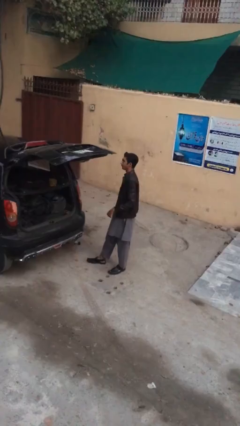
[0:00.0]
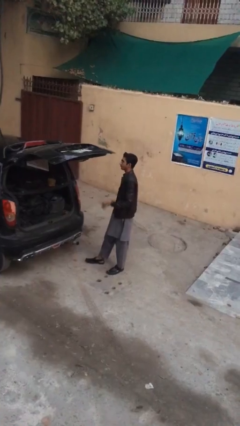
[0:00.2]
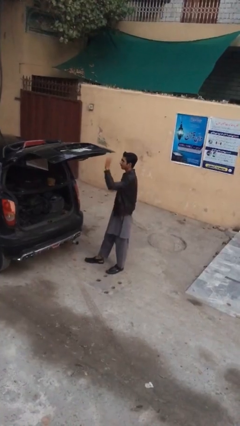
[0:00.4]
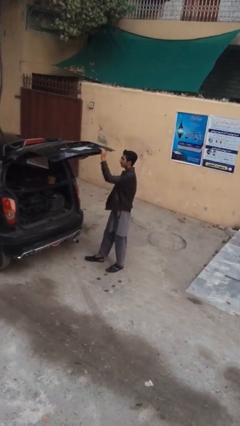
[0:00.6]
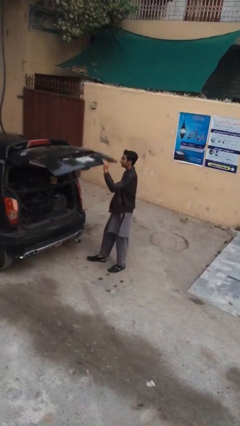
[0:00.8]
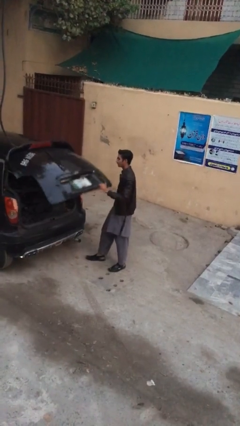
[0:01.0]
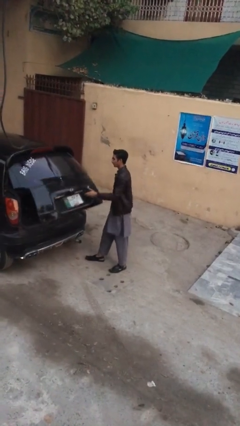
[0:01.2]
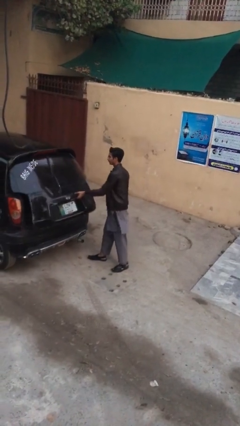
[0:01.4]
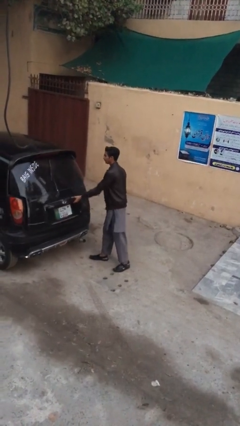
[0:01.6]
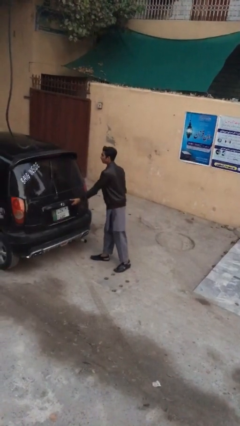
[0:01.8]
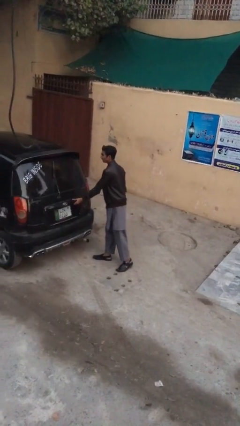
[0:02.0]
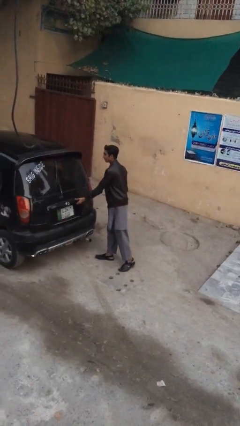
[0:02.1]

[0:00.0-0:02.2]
person closes car trunk

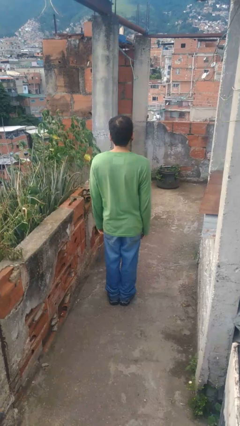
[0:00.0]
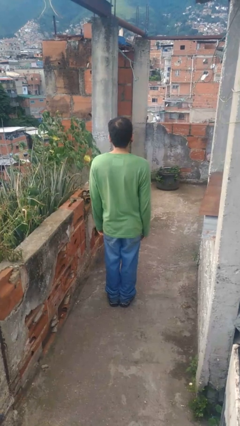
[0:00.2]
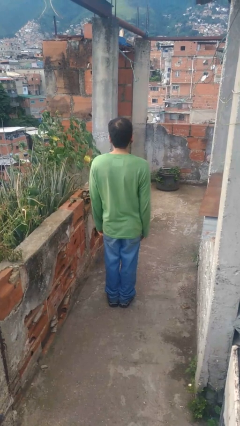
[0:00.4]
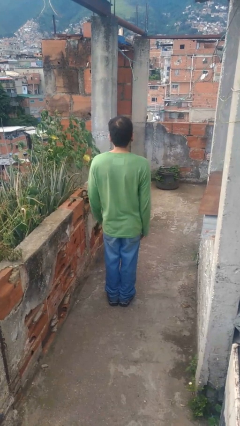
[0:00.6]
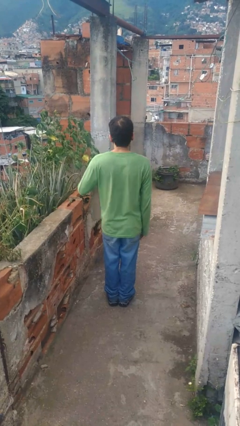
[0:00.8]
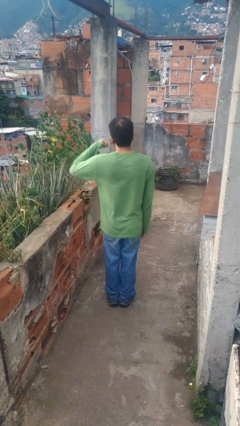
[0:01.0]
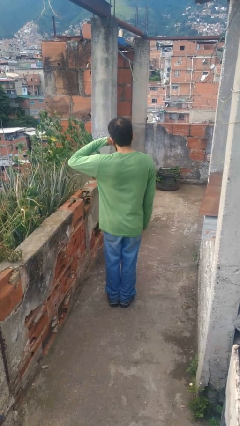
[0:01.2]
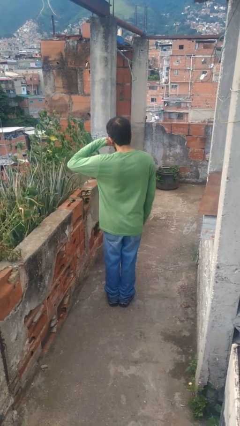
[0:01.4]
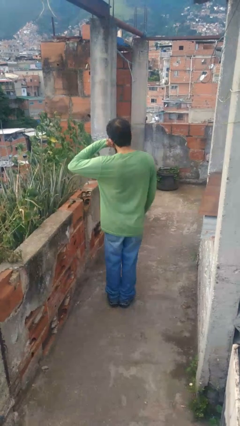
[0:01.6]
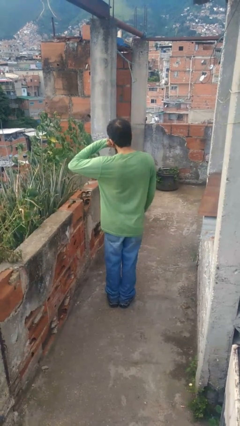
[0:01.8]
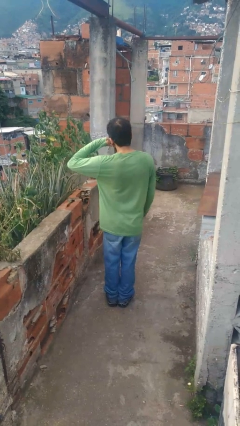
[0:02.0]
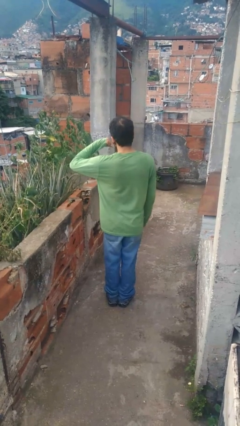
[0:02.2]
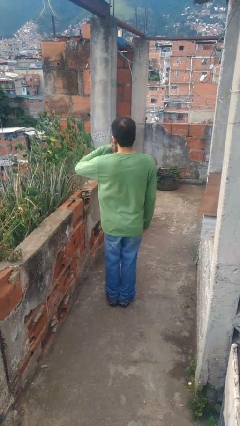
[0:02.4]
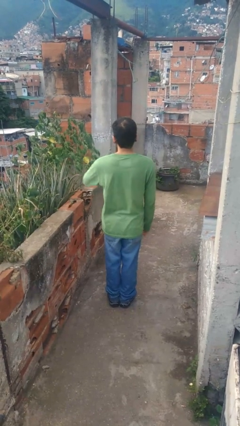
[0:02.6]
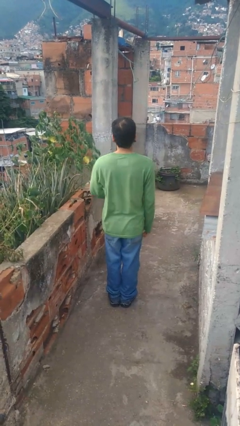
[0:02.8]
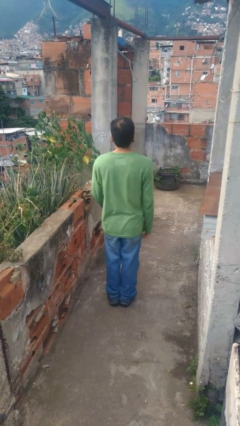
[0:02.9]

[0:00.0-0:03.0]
person gestures call me

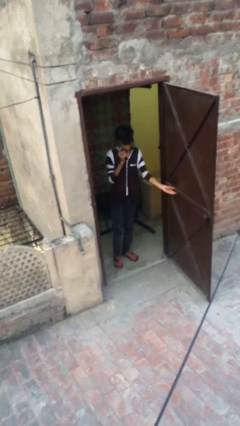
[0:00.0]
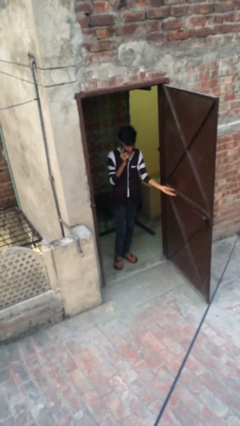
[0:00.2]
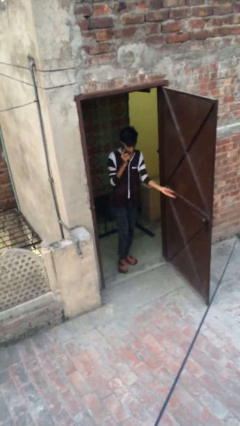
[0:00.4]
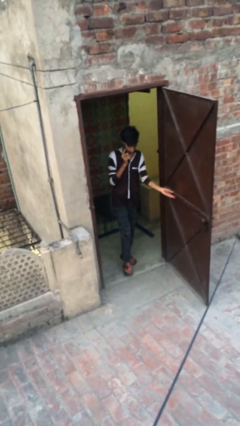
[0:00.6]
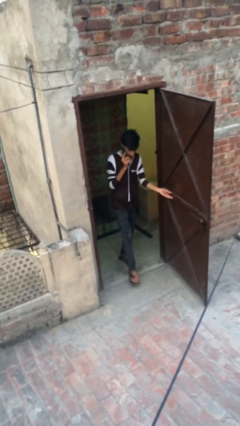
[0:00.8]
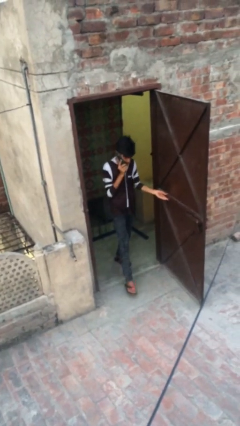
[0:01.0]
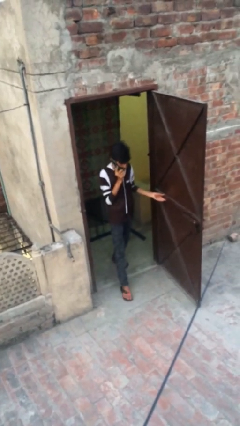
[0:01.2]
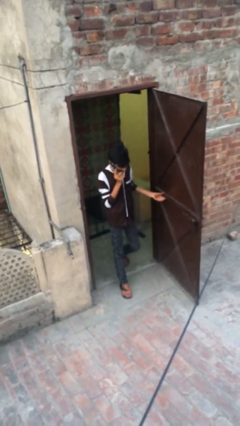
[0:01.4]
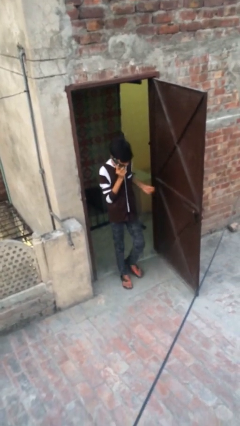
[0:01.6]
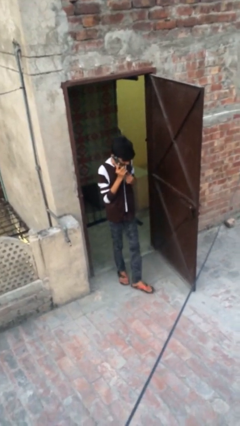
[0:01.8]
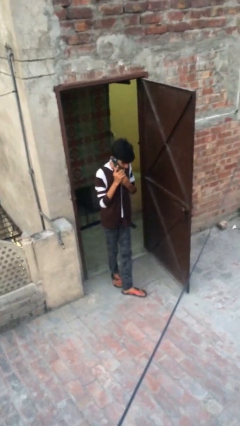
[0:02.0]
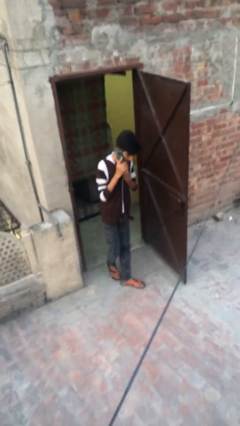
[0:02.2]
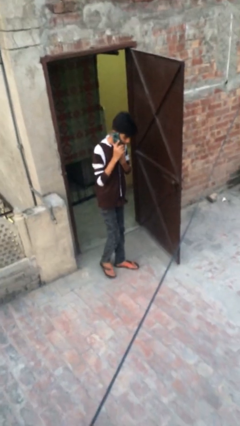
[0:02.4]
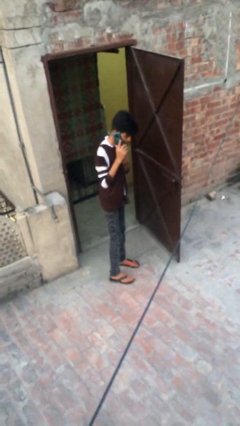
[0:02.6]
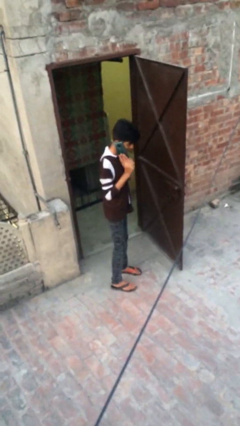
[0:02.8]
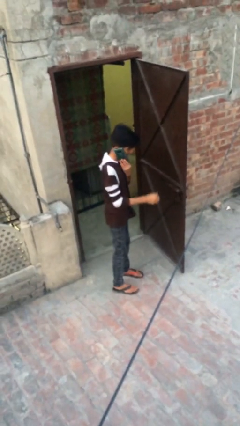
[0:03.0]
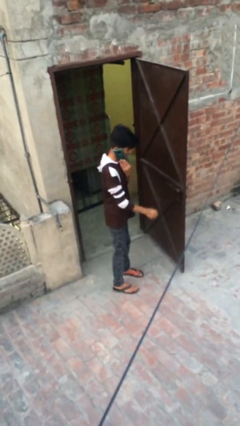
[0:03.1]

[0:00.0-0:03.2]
person enters scene through structure

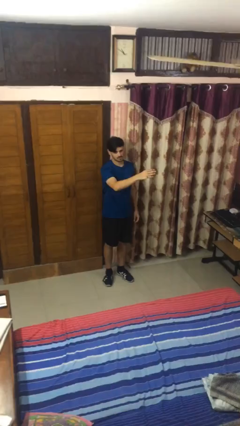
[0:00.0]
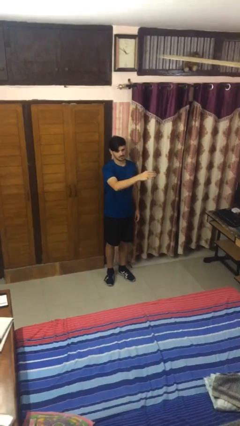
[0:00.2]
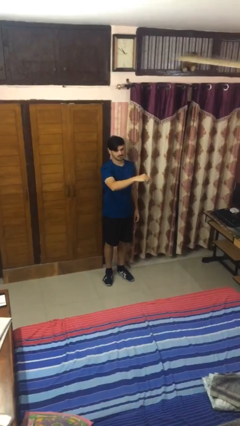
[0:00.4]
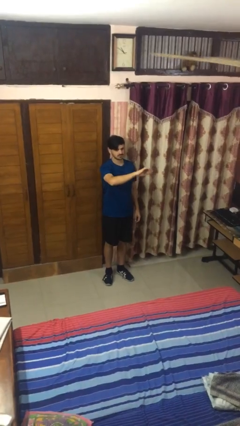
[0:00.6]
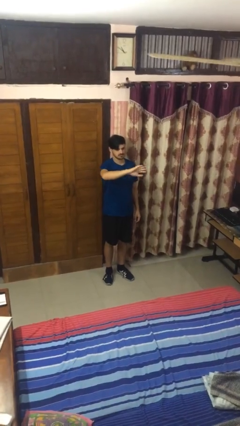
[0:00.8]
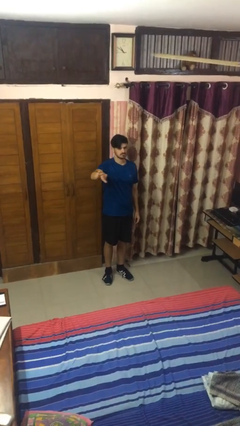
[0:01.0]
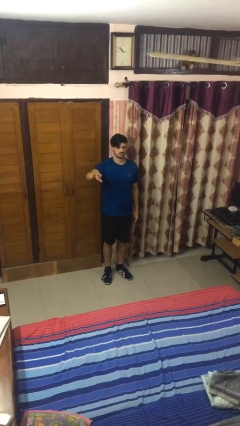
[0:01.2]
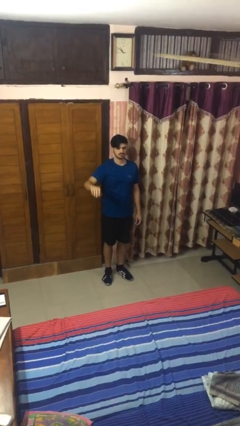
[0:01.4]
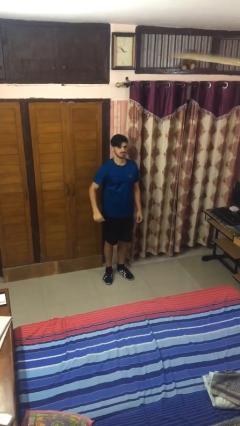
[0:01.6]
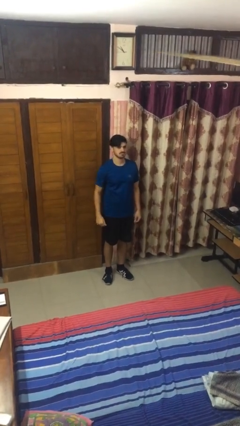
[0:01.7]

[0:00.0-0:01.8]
person gestures swipe right

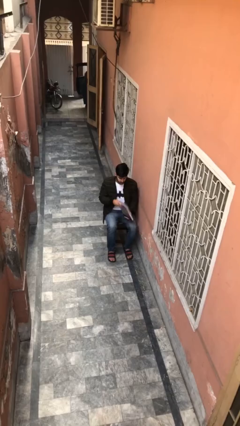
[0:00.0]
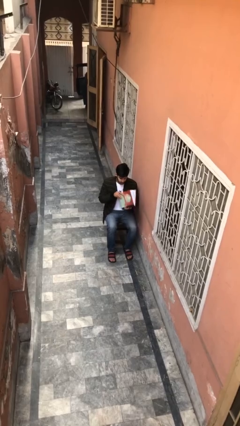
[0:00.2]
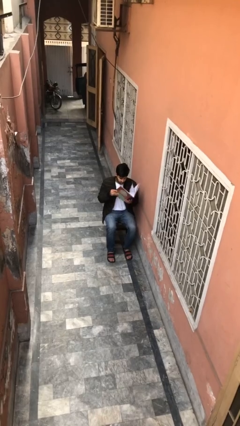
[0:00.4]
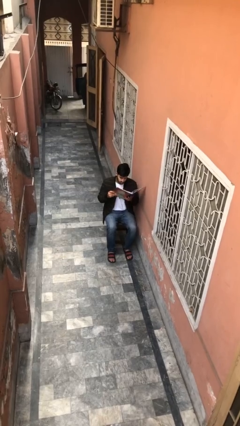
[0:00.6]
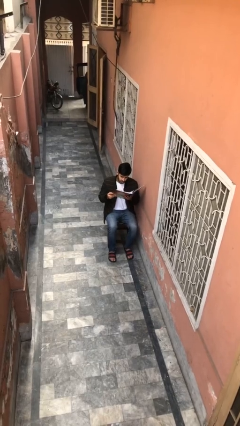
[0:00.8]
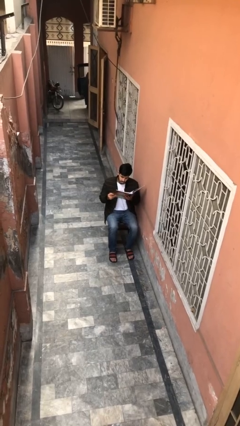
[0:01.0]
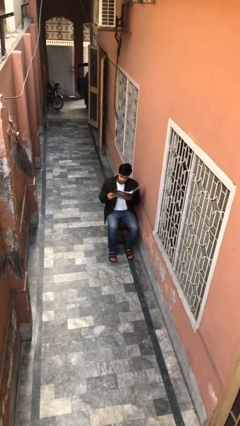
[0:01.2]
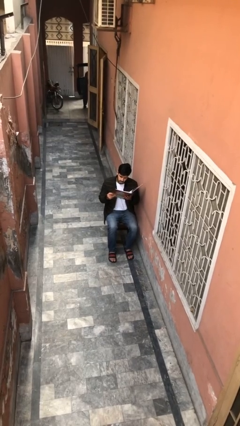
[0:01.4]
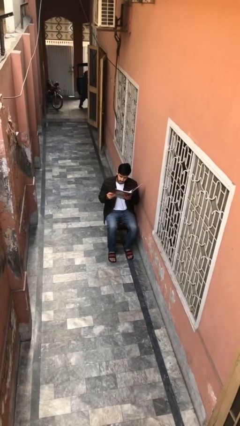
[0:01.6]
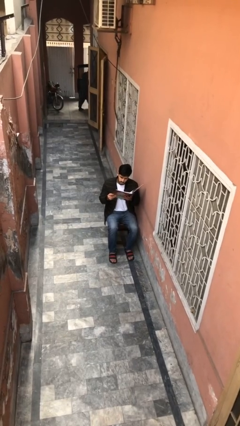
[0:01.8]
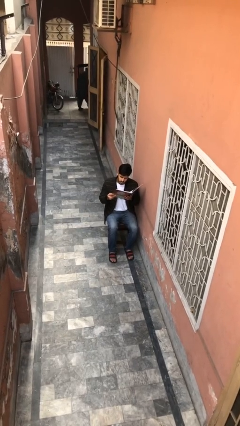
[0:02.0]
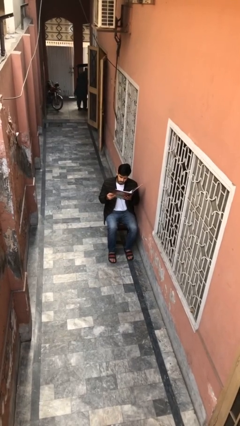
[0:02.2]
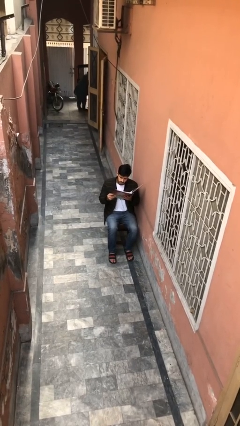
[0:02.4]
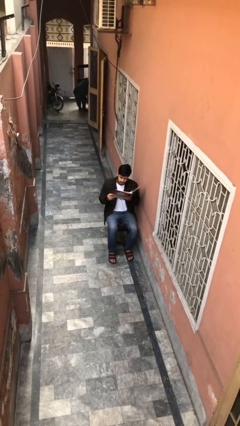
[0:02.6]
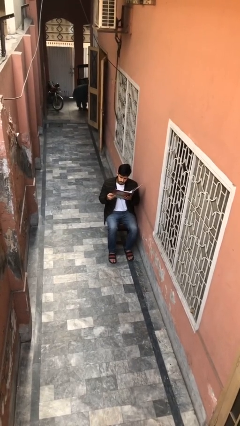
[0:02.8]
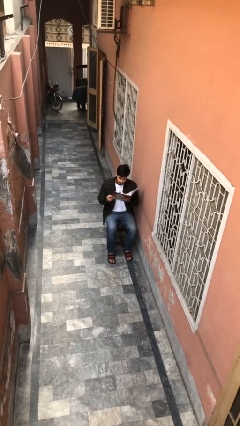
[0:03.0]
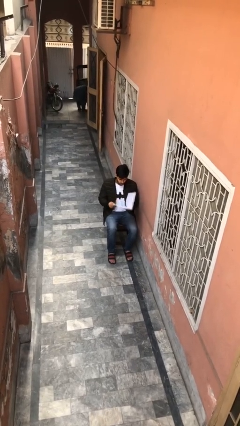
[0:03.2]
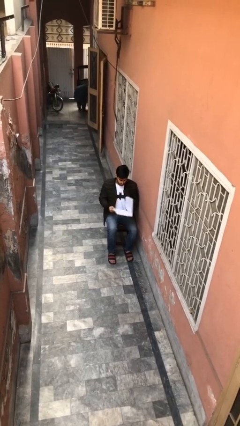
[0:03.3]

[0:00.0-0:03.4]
person reads document

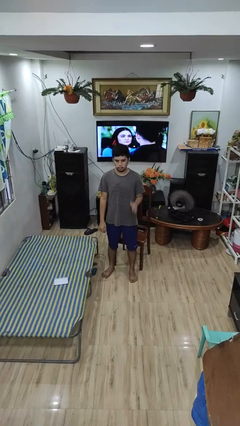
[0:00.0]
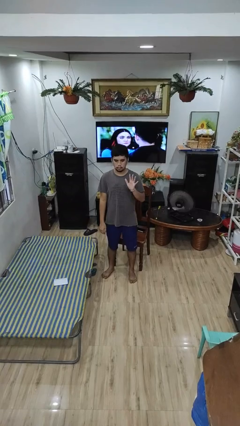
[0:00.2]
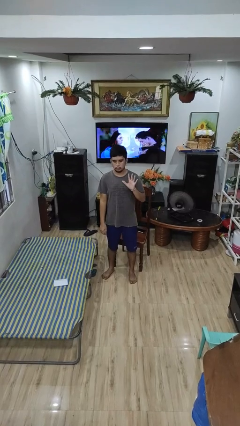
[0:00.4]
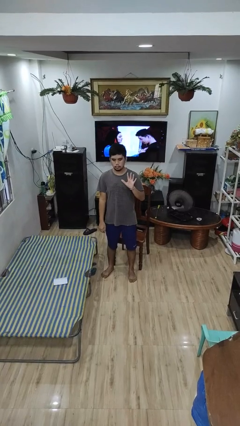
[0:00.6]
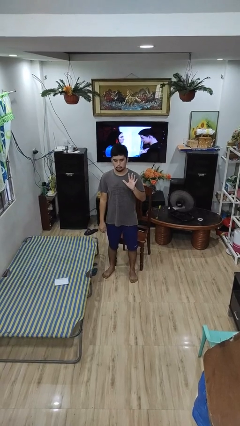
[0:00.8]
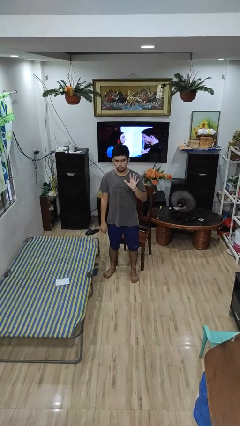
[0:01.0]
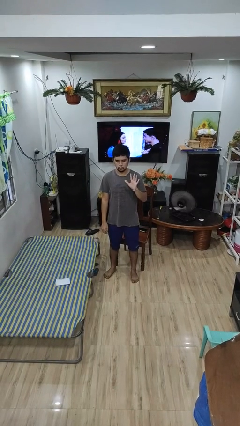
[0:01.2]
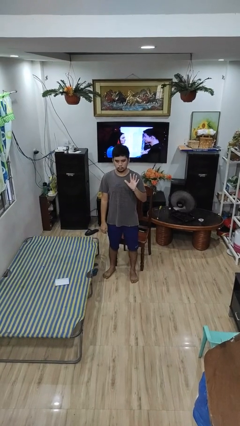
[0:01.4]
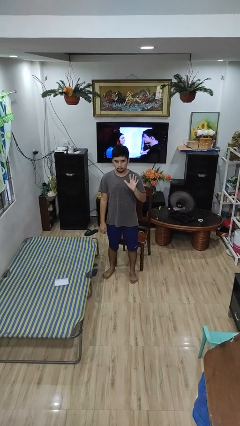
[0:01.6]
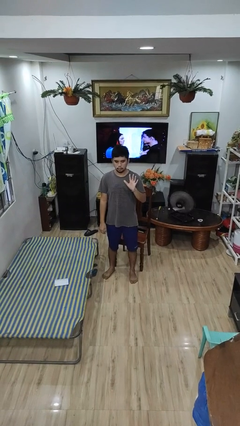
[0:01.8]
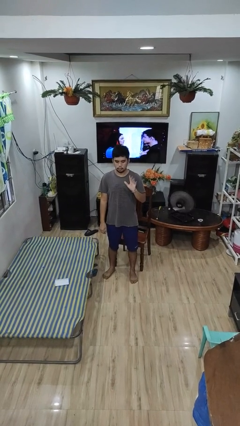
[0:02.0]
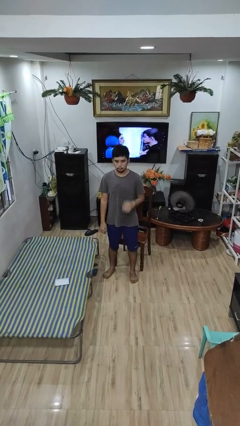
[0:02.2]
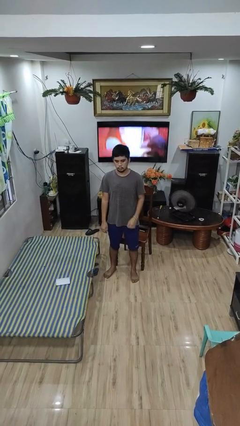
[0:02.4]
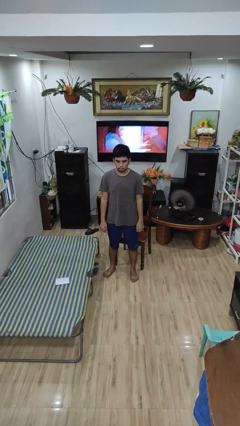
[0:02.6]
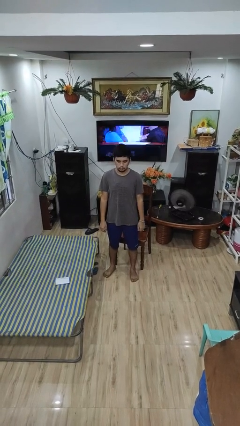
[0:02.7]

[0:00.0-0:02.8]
person gestures number five

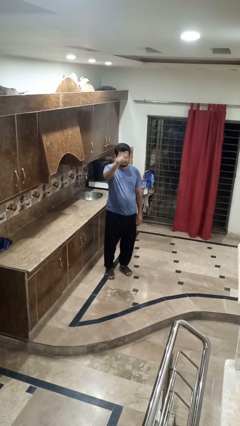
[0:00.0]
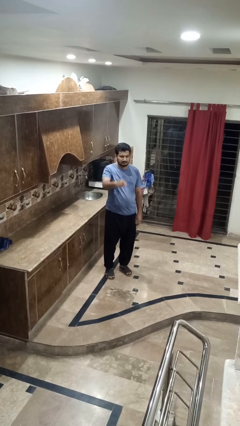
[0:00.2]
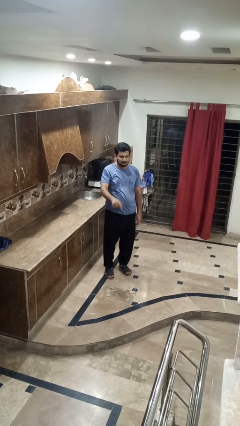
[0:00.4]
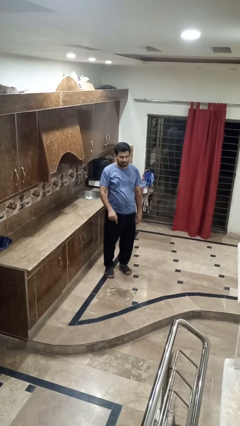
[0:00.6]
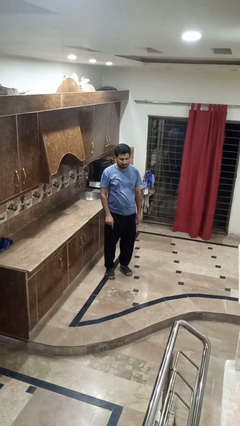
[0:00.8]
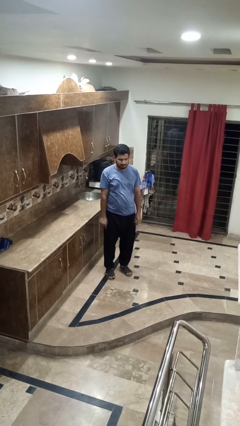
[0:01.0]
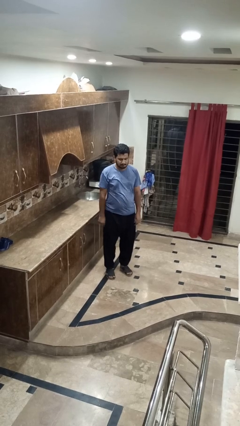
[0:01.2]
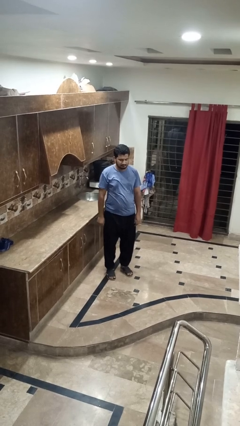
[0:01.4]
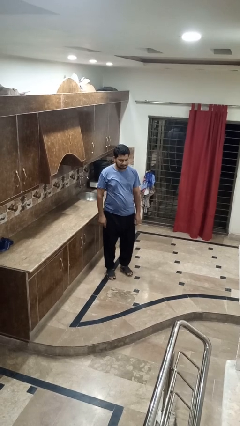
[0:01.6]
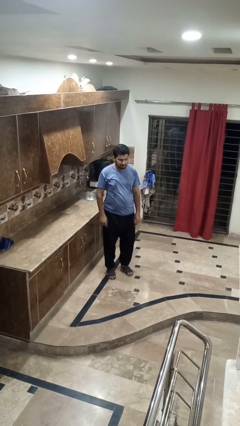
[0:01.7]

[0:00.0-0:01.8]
person gestures swipe down
